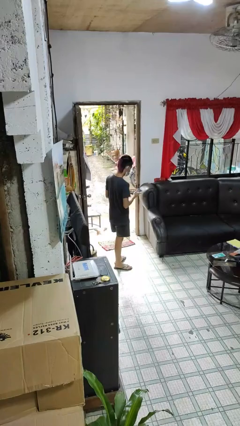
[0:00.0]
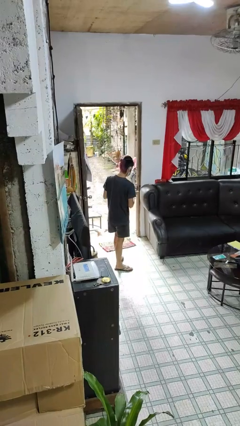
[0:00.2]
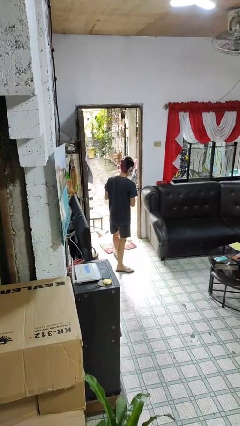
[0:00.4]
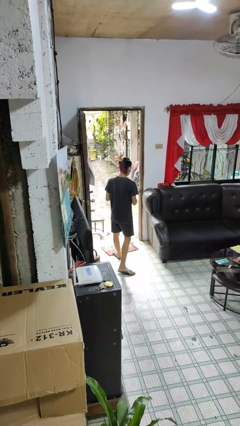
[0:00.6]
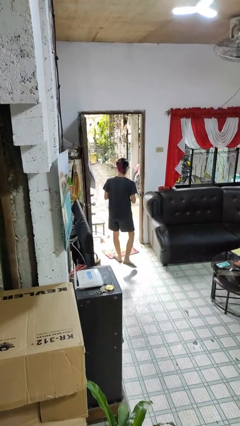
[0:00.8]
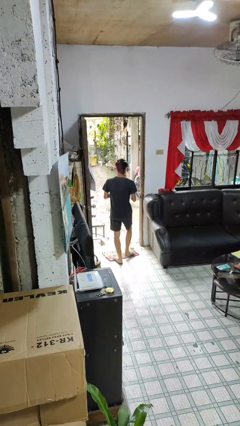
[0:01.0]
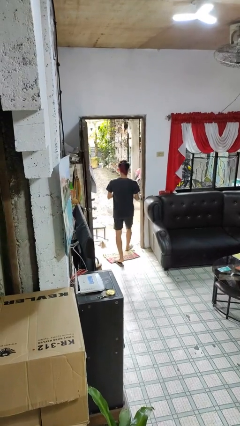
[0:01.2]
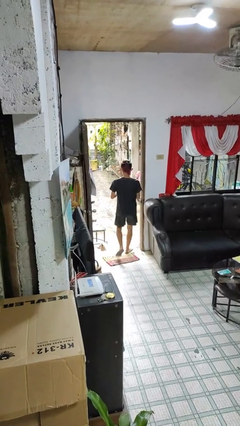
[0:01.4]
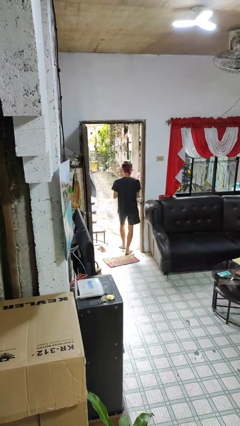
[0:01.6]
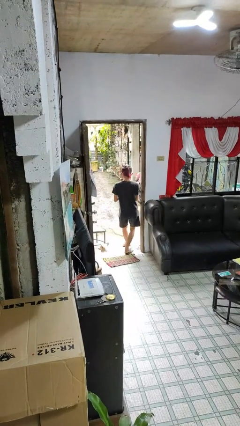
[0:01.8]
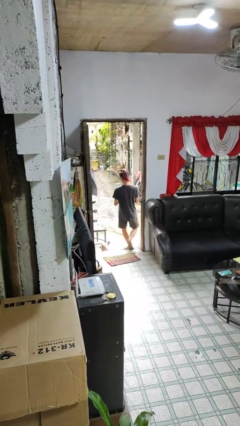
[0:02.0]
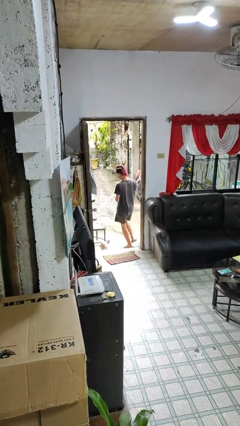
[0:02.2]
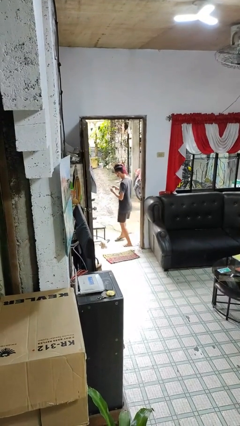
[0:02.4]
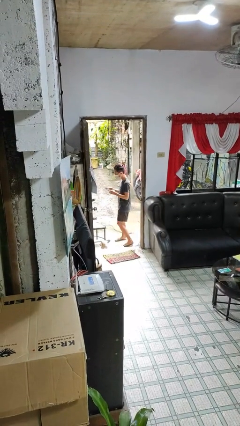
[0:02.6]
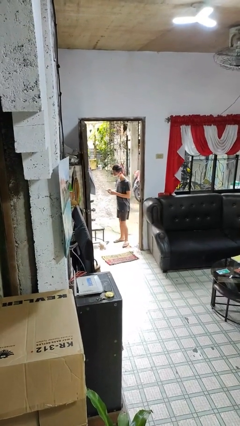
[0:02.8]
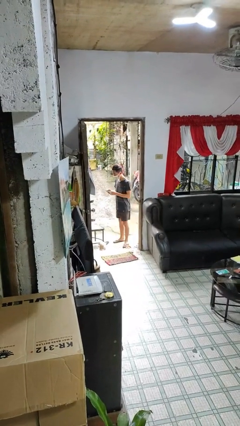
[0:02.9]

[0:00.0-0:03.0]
person exits scene through structure

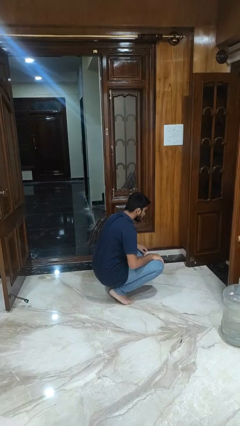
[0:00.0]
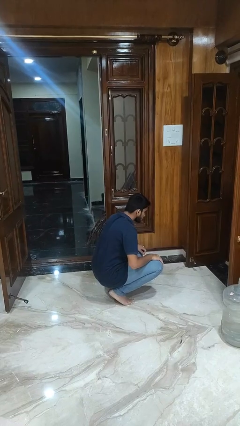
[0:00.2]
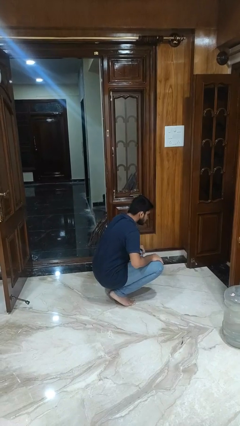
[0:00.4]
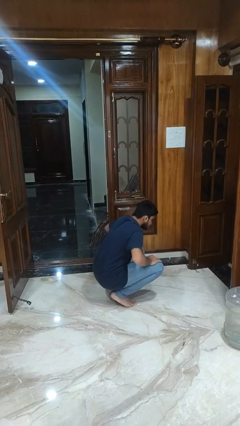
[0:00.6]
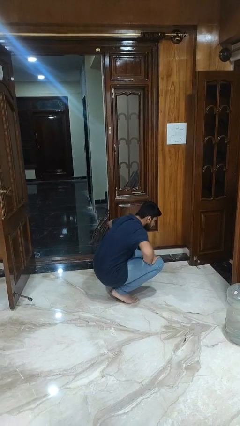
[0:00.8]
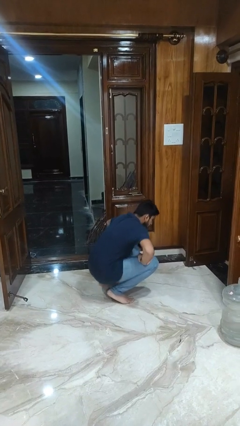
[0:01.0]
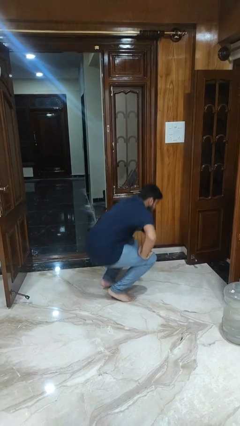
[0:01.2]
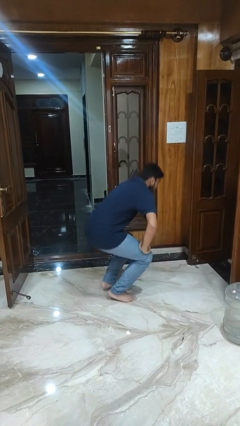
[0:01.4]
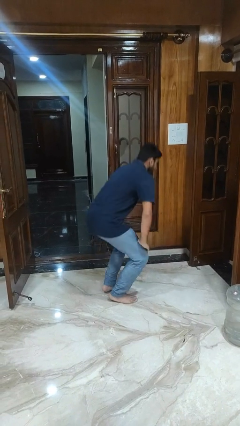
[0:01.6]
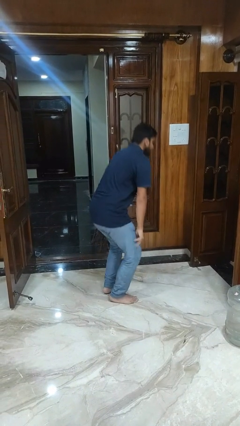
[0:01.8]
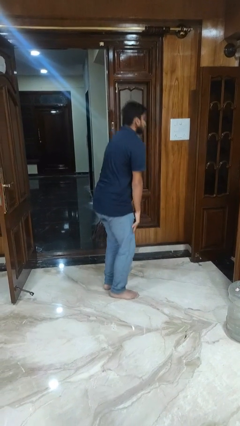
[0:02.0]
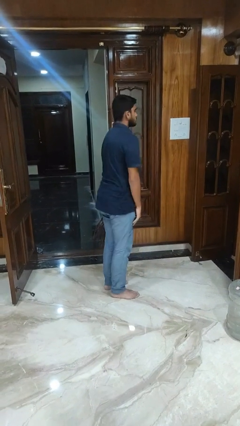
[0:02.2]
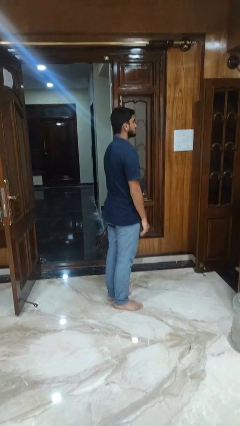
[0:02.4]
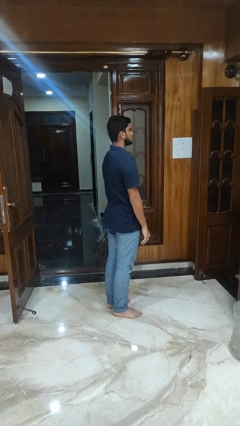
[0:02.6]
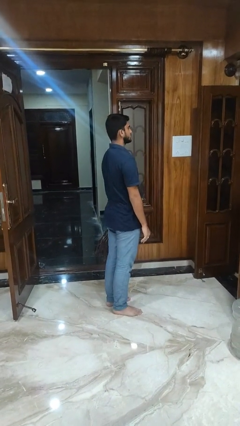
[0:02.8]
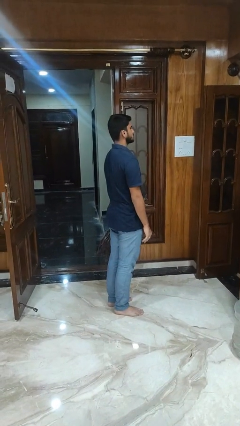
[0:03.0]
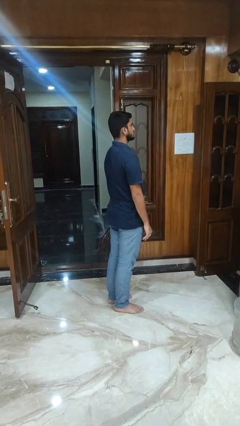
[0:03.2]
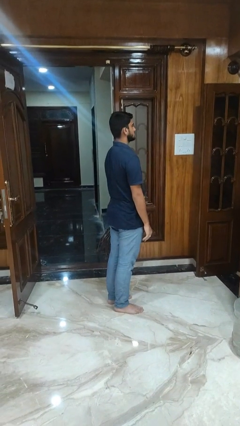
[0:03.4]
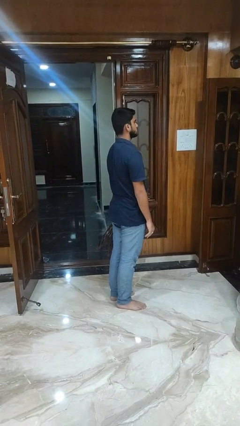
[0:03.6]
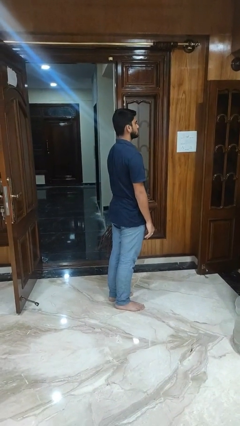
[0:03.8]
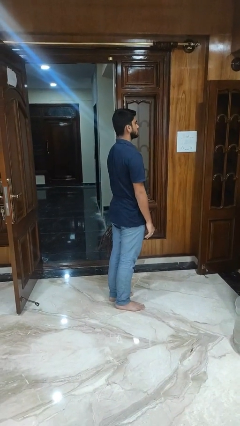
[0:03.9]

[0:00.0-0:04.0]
person stands up

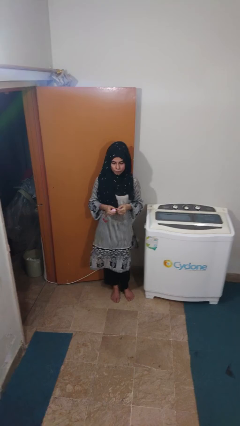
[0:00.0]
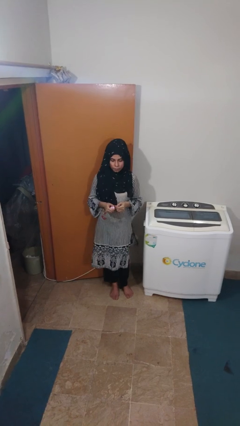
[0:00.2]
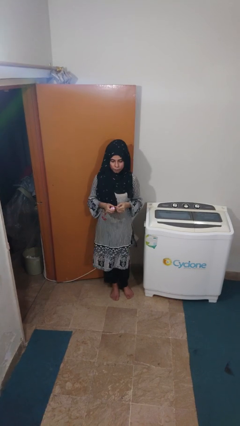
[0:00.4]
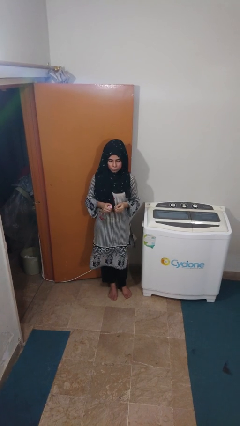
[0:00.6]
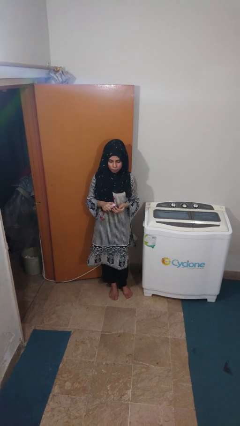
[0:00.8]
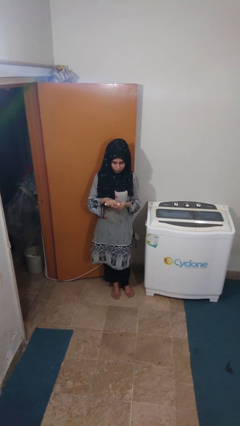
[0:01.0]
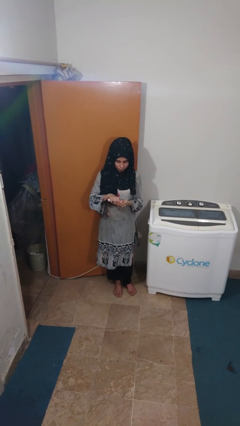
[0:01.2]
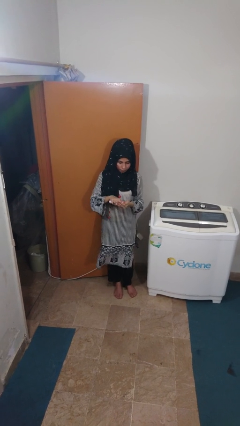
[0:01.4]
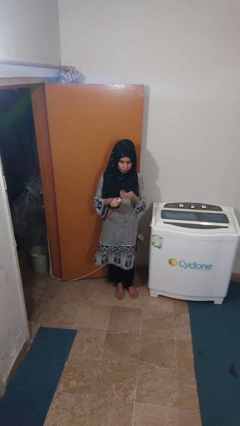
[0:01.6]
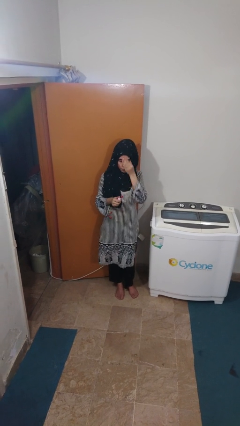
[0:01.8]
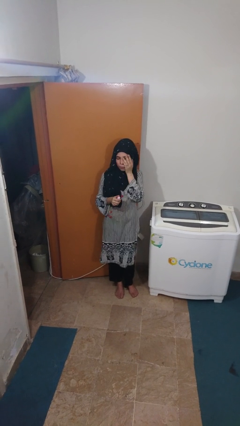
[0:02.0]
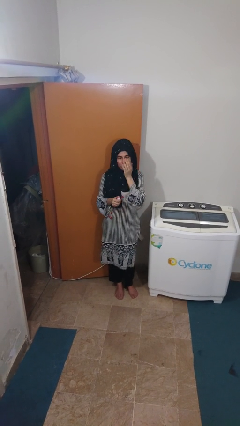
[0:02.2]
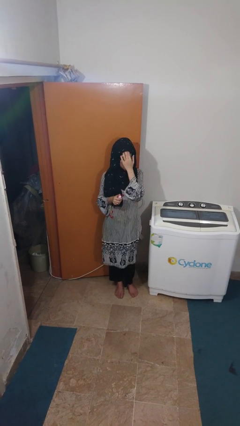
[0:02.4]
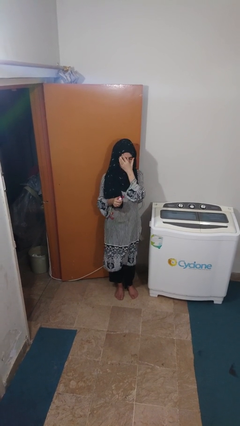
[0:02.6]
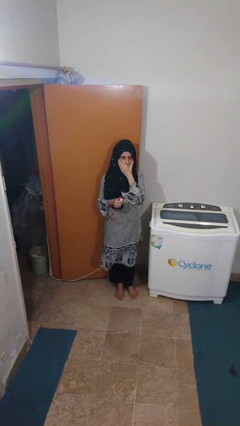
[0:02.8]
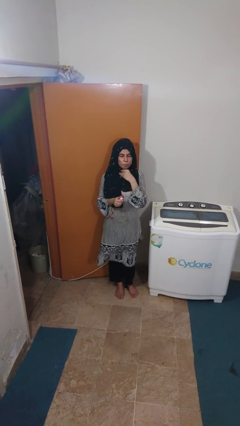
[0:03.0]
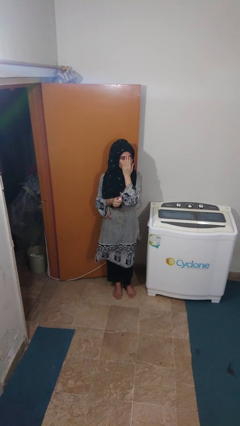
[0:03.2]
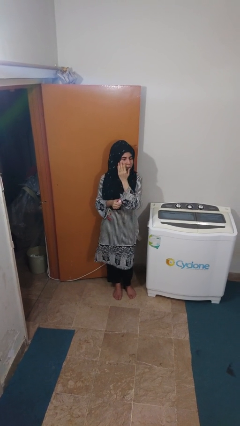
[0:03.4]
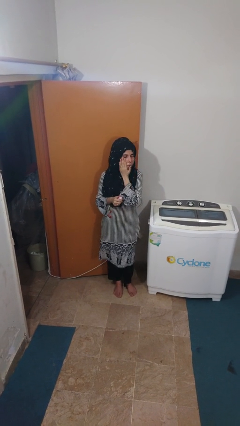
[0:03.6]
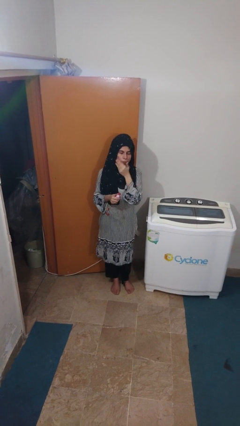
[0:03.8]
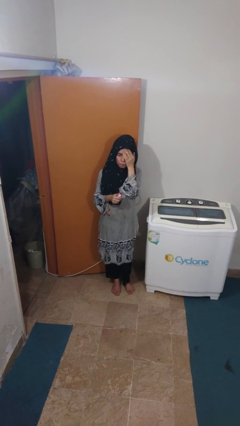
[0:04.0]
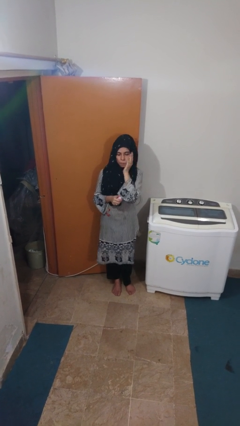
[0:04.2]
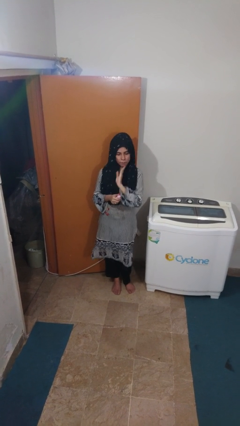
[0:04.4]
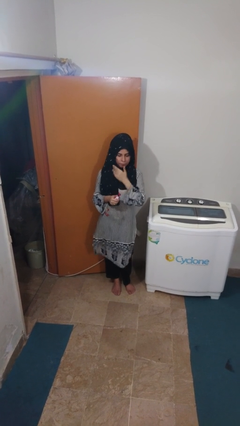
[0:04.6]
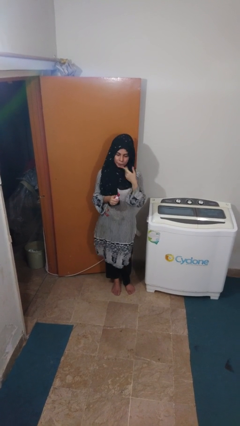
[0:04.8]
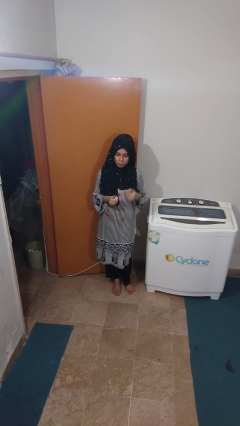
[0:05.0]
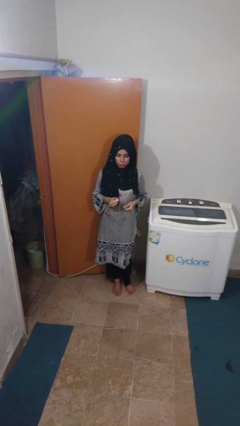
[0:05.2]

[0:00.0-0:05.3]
person applies sunscreen

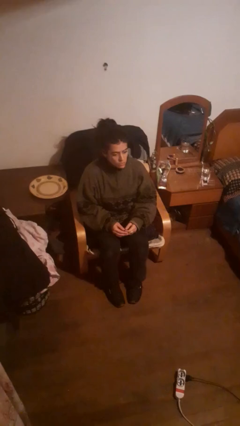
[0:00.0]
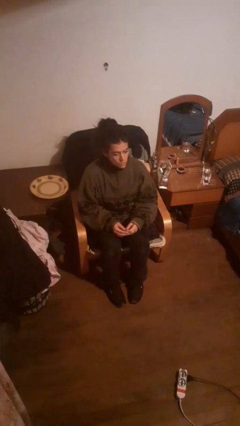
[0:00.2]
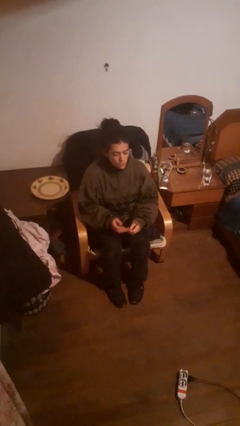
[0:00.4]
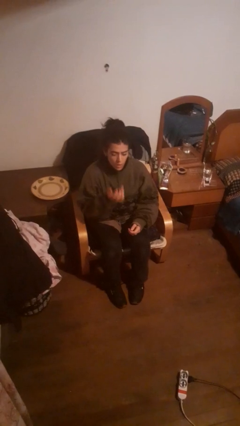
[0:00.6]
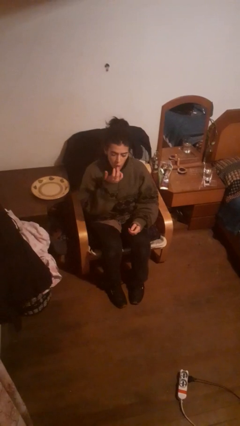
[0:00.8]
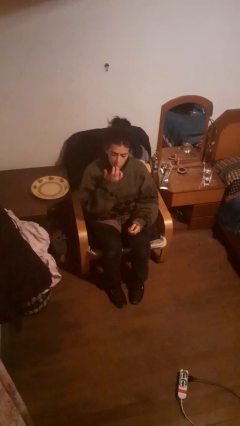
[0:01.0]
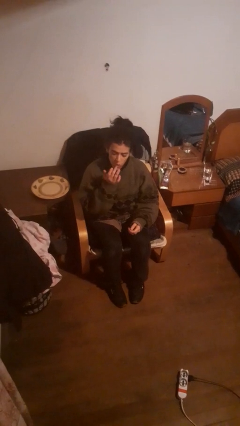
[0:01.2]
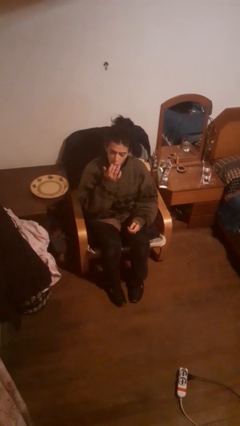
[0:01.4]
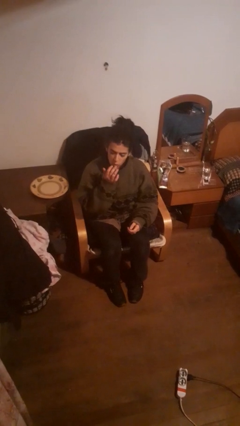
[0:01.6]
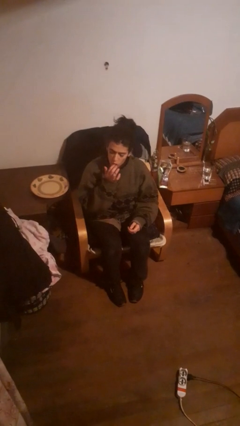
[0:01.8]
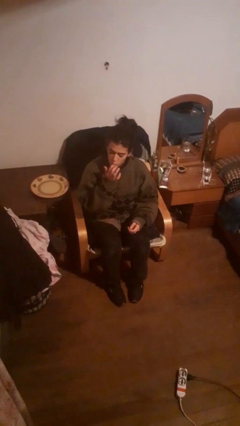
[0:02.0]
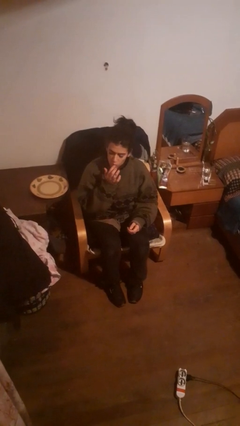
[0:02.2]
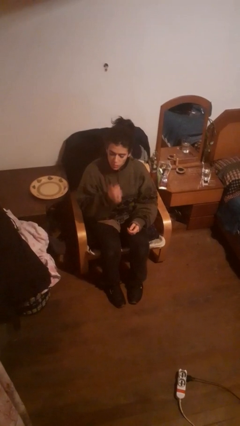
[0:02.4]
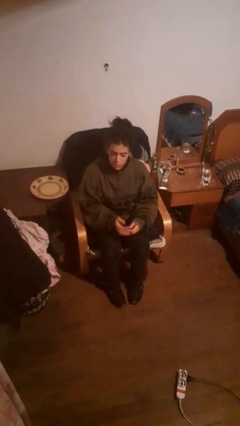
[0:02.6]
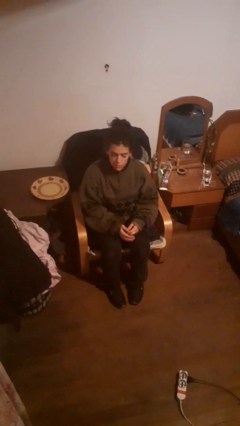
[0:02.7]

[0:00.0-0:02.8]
person licks fingers

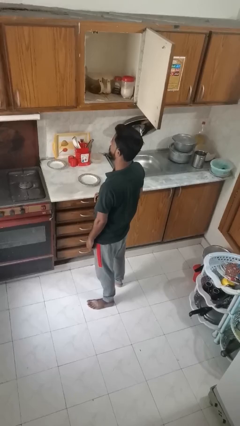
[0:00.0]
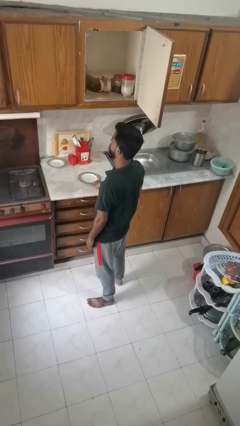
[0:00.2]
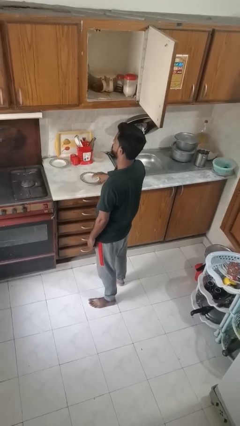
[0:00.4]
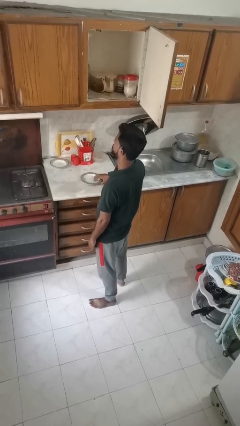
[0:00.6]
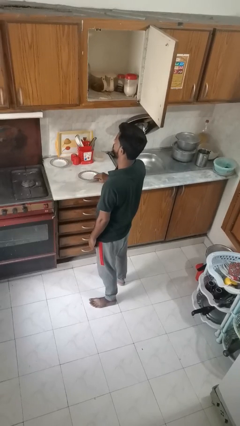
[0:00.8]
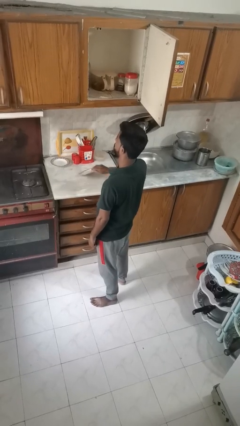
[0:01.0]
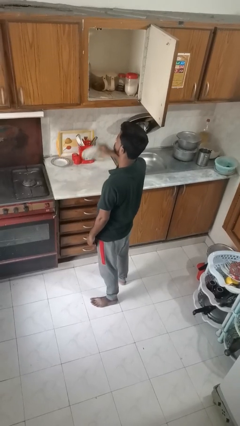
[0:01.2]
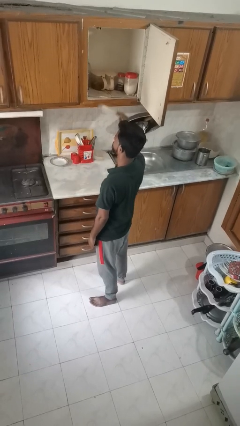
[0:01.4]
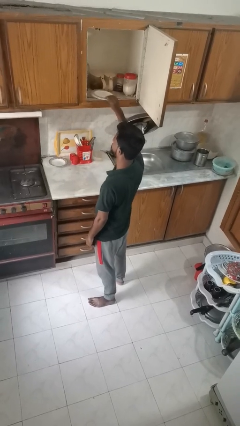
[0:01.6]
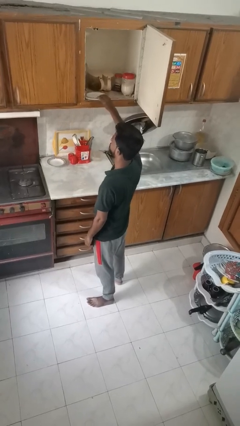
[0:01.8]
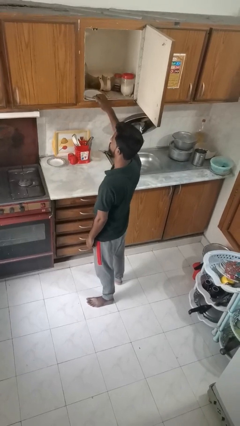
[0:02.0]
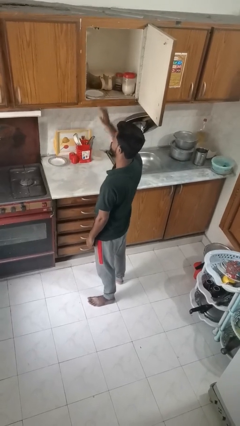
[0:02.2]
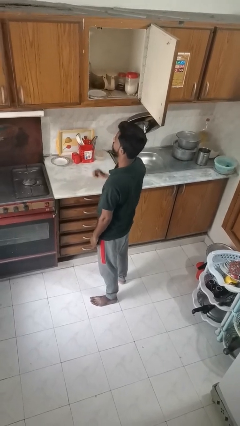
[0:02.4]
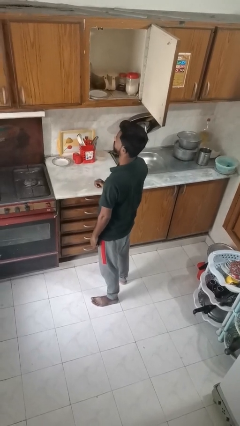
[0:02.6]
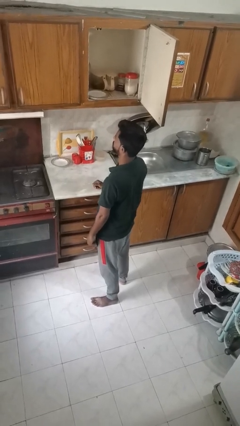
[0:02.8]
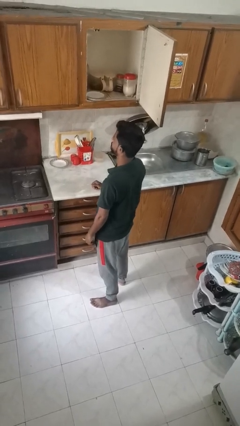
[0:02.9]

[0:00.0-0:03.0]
person puts object in cabinet
